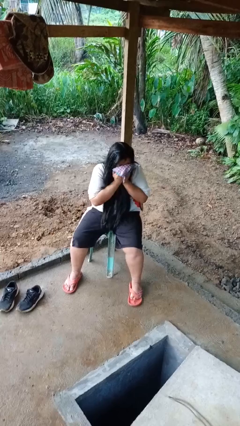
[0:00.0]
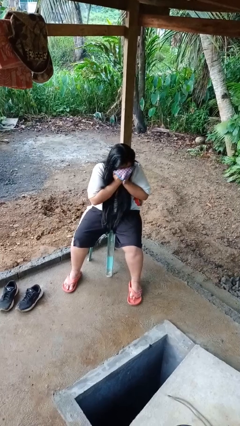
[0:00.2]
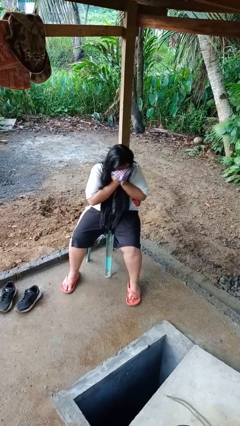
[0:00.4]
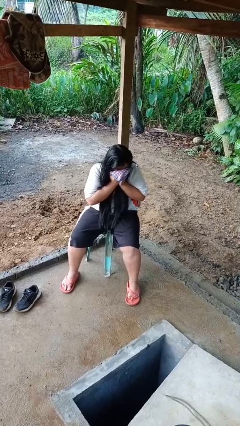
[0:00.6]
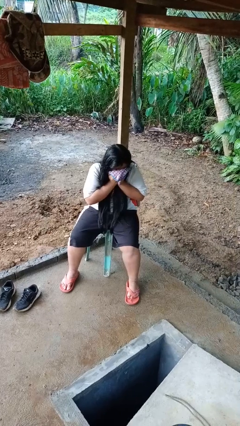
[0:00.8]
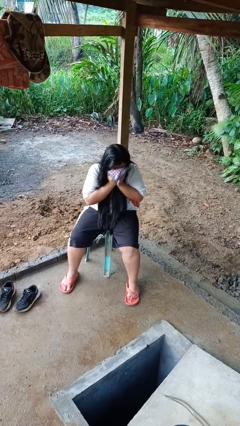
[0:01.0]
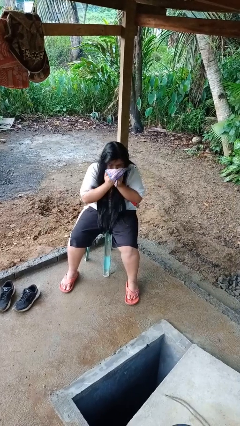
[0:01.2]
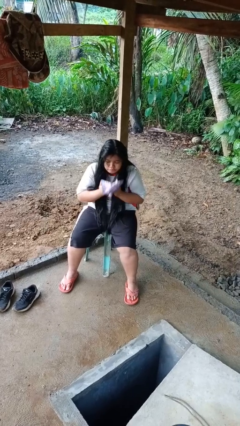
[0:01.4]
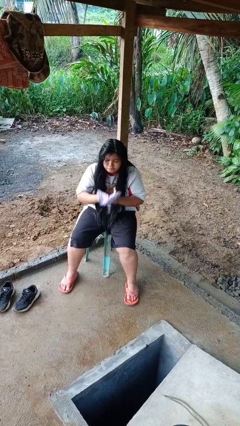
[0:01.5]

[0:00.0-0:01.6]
person blows nose

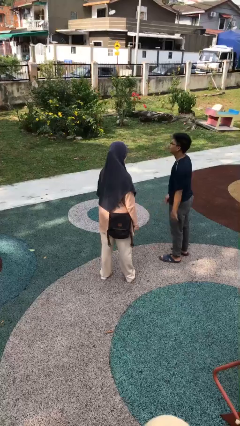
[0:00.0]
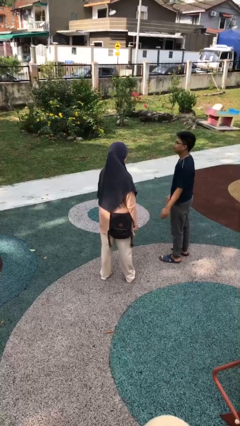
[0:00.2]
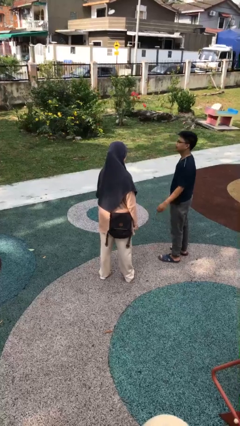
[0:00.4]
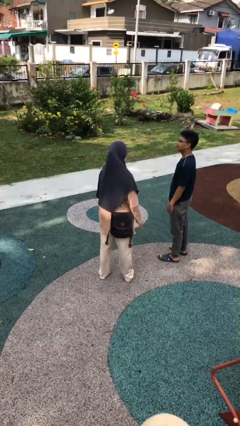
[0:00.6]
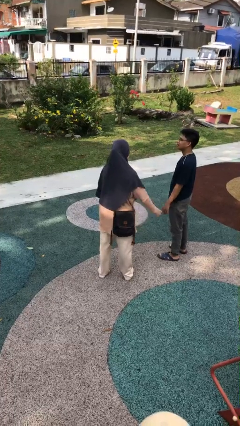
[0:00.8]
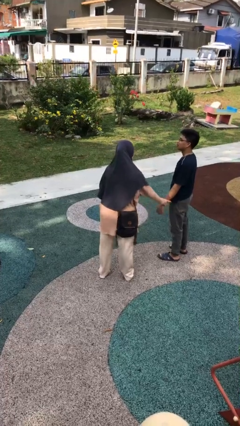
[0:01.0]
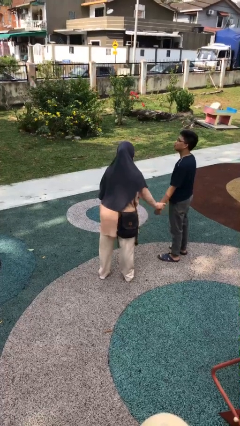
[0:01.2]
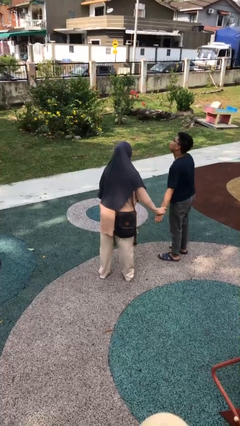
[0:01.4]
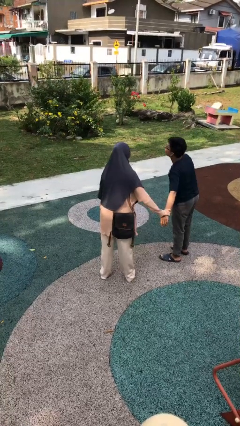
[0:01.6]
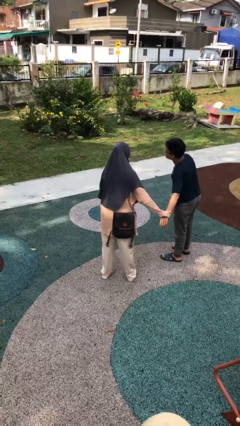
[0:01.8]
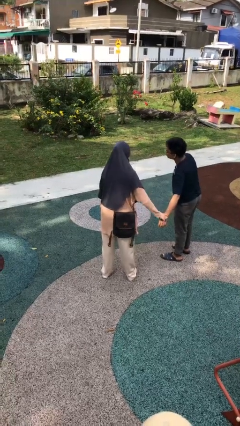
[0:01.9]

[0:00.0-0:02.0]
person grabs person by forearm

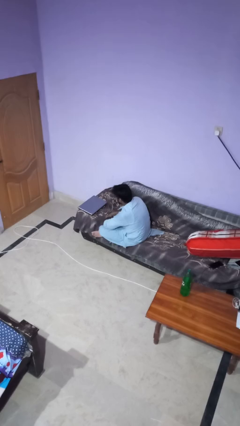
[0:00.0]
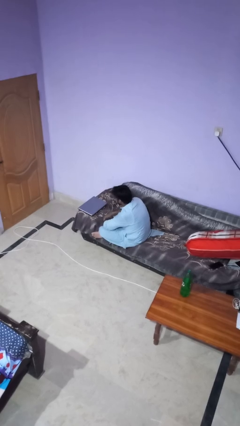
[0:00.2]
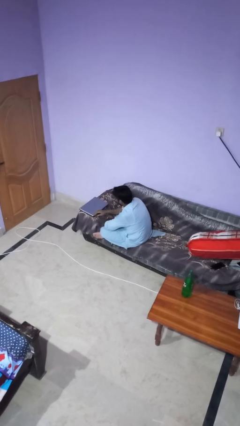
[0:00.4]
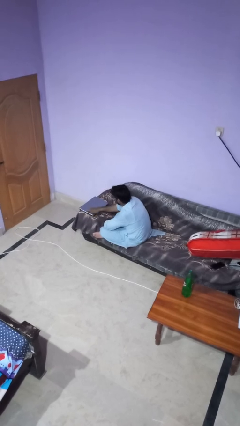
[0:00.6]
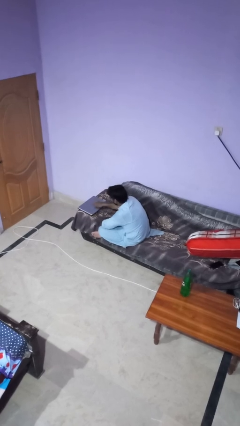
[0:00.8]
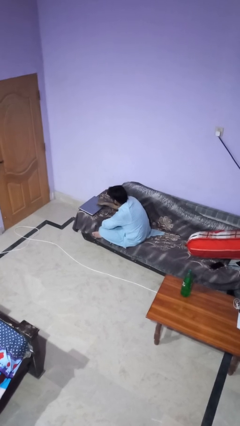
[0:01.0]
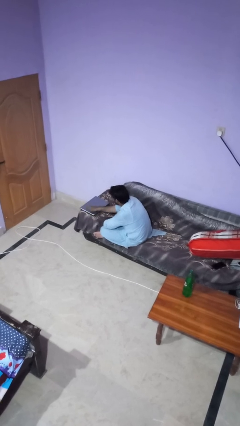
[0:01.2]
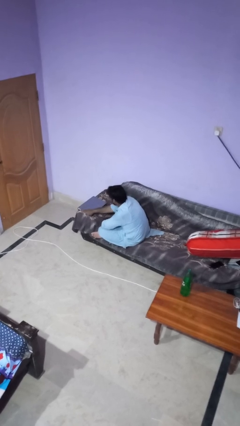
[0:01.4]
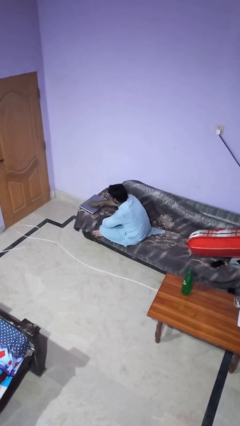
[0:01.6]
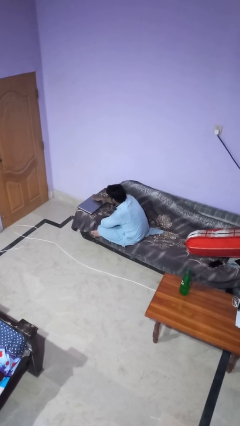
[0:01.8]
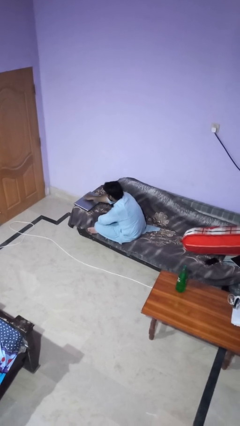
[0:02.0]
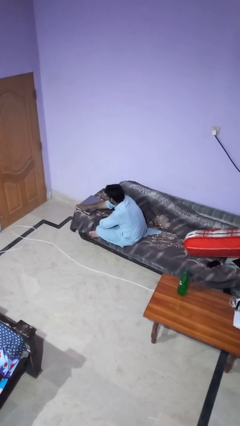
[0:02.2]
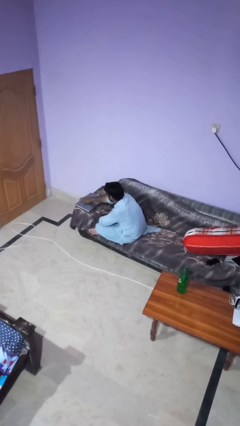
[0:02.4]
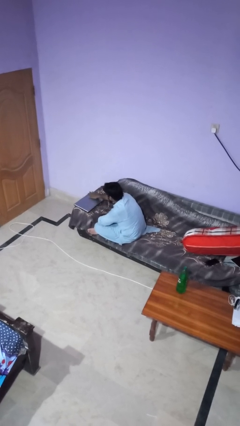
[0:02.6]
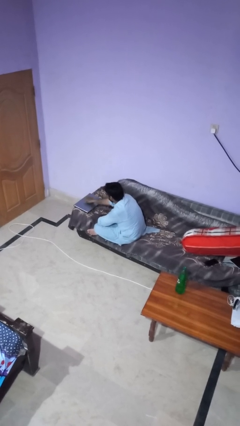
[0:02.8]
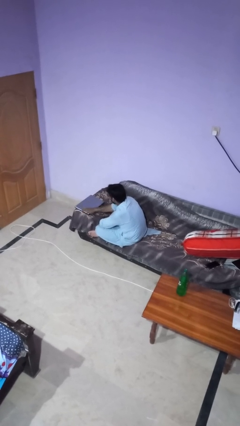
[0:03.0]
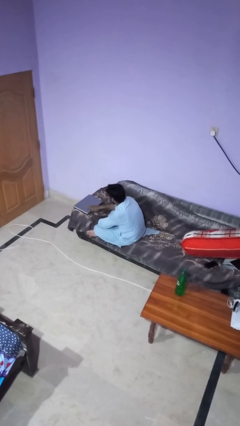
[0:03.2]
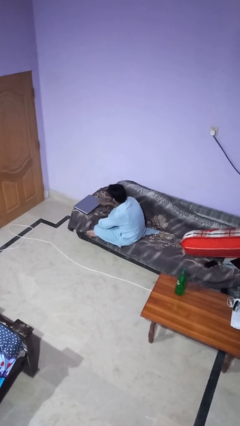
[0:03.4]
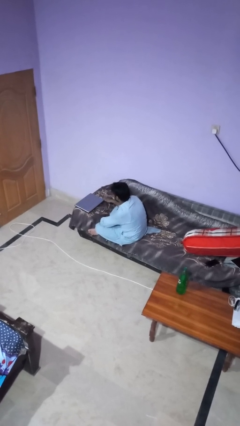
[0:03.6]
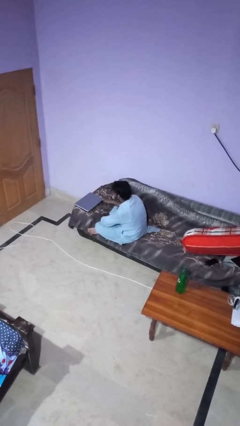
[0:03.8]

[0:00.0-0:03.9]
person waves hand over object

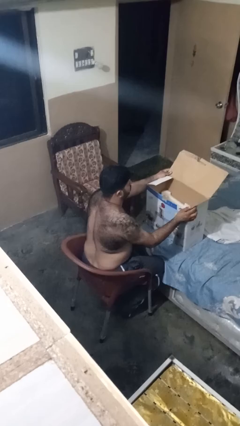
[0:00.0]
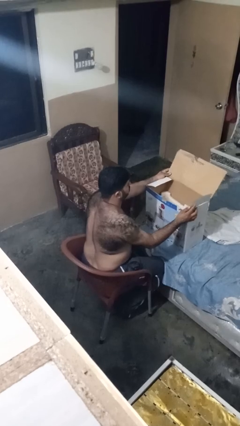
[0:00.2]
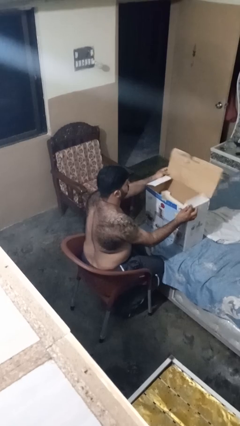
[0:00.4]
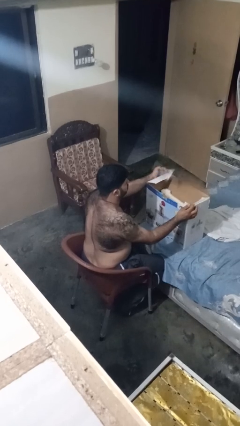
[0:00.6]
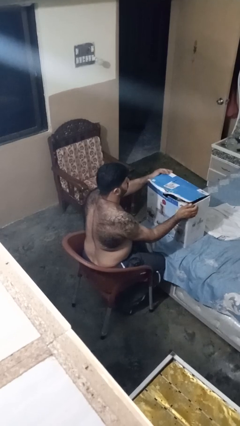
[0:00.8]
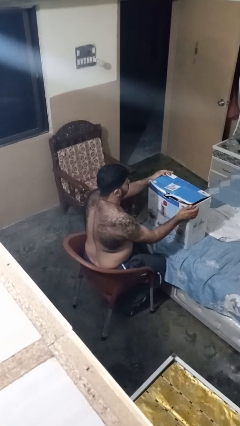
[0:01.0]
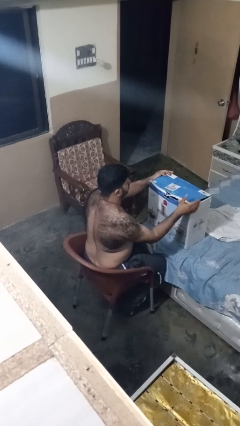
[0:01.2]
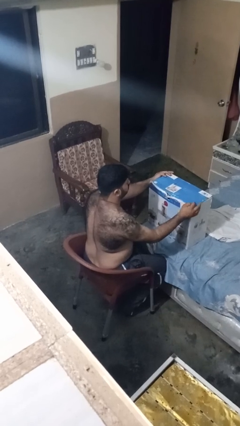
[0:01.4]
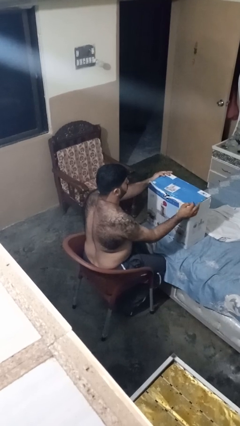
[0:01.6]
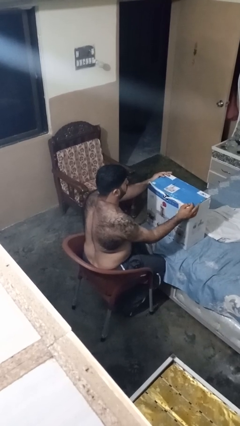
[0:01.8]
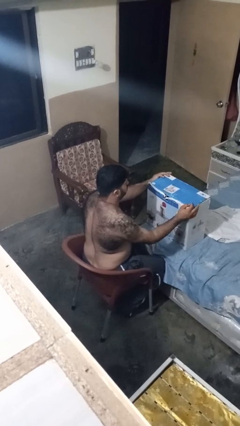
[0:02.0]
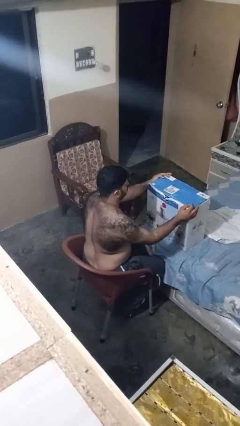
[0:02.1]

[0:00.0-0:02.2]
person closes box

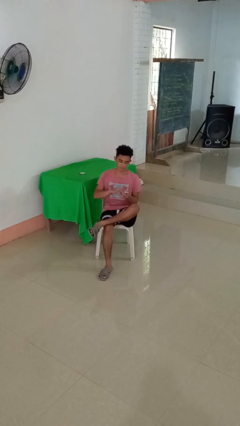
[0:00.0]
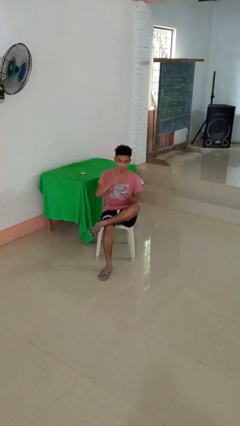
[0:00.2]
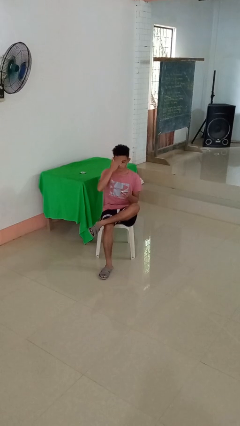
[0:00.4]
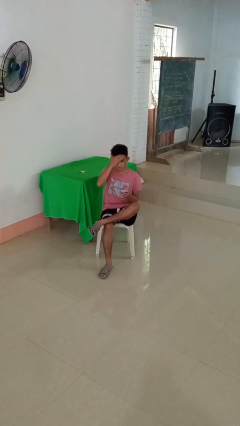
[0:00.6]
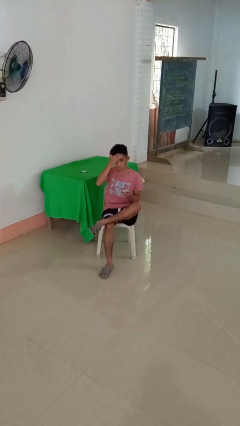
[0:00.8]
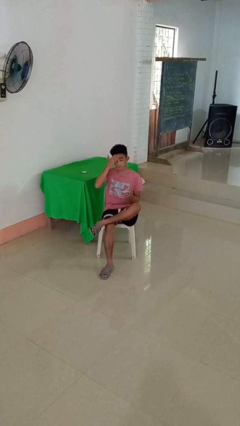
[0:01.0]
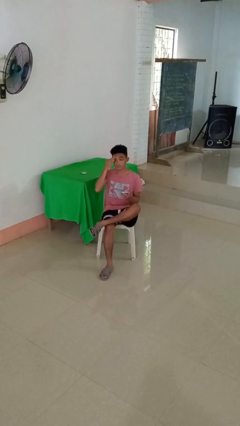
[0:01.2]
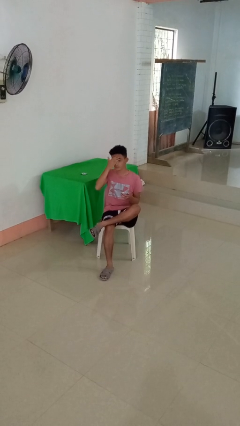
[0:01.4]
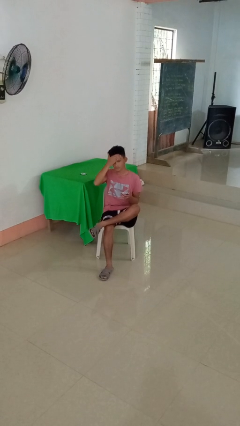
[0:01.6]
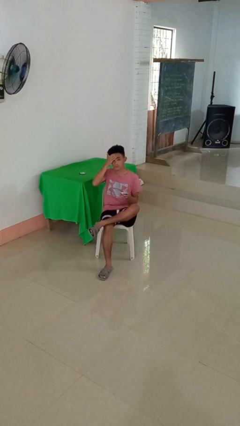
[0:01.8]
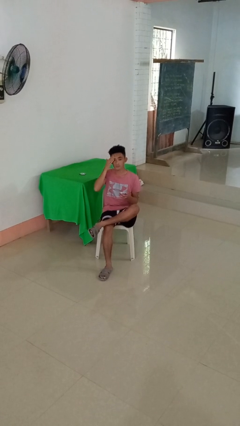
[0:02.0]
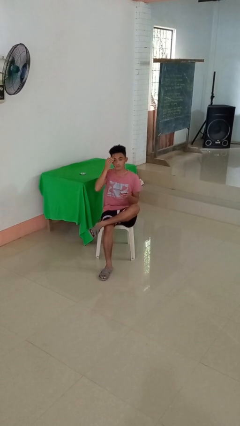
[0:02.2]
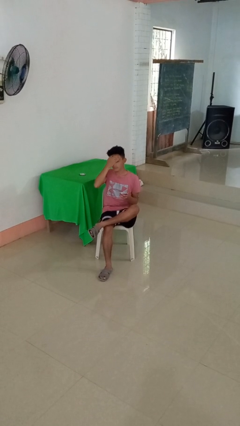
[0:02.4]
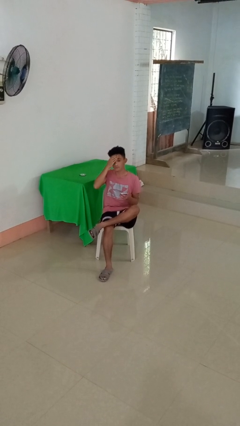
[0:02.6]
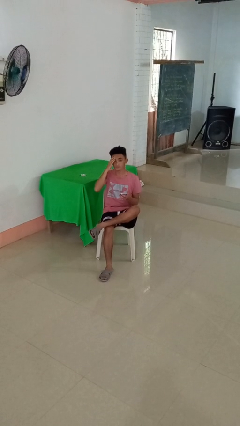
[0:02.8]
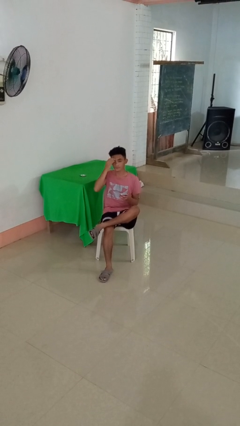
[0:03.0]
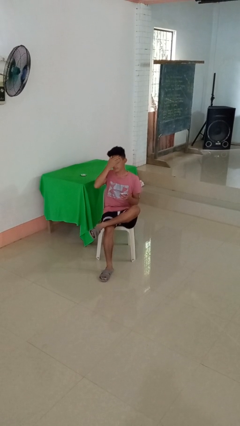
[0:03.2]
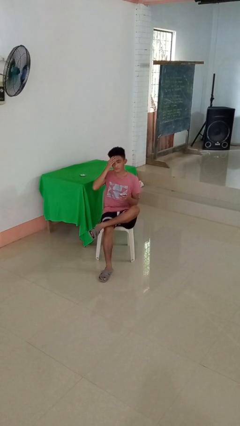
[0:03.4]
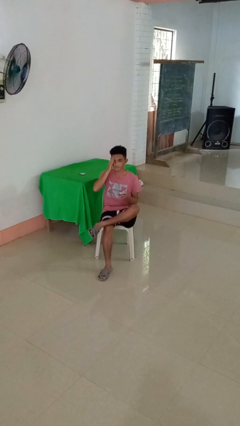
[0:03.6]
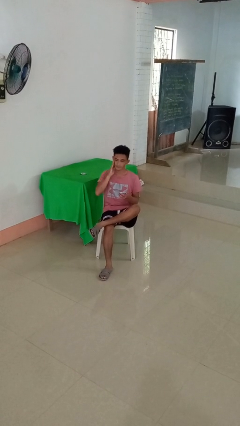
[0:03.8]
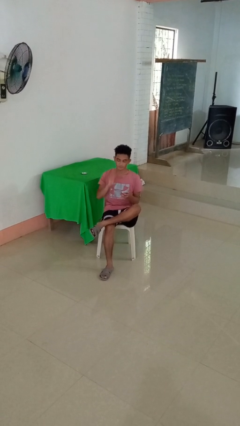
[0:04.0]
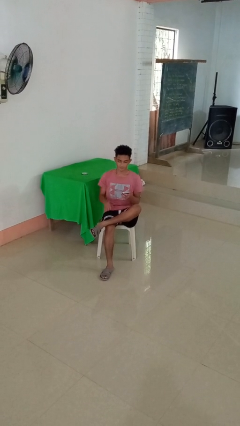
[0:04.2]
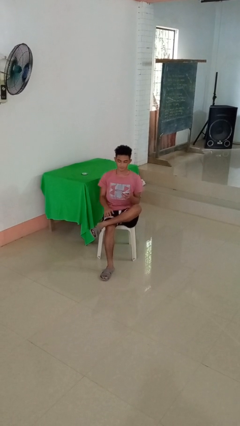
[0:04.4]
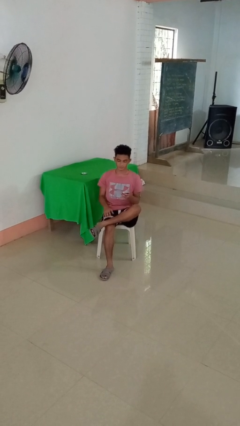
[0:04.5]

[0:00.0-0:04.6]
person applies facial moisturizer

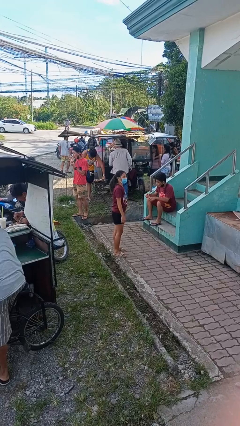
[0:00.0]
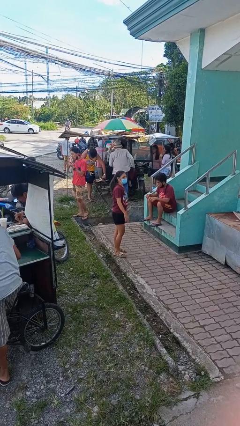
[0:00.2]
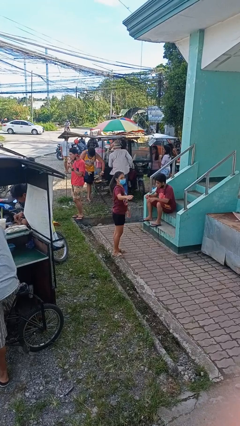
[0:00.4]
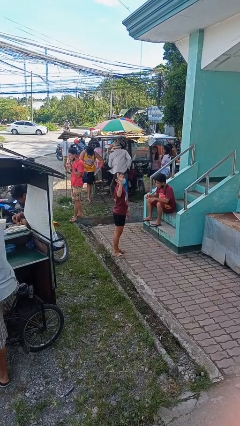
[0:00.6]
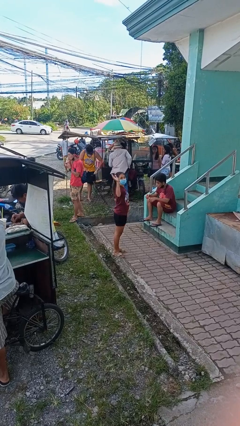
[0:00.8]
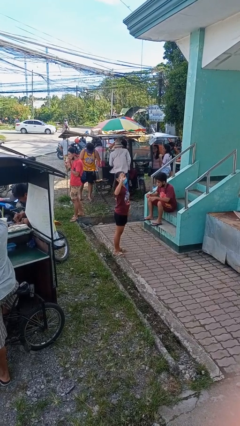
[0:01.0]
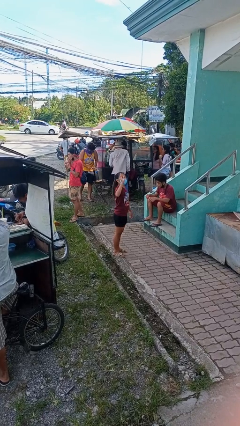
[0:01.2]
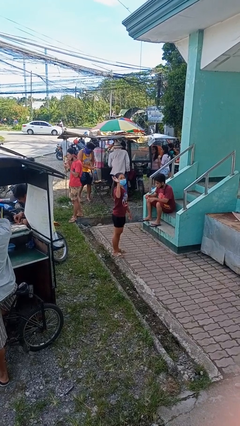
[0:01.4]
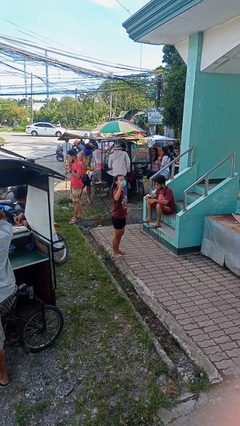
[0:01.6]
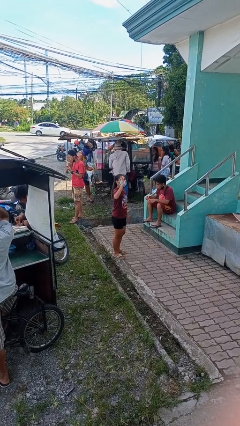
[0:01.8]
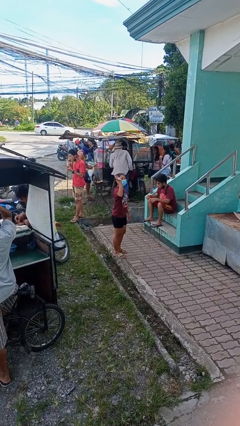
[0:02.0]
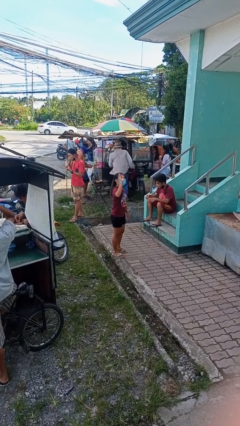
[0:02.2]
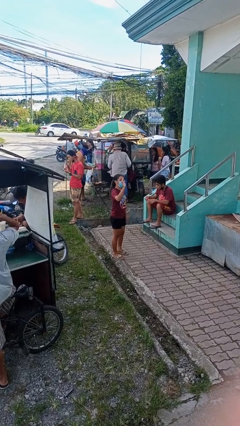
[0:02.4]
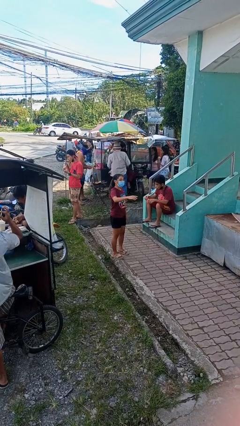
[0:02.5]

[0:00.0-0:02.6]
person waves at person

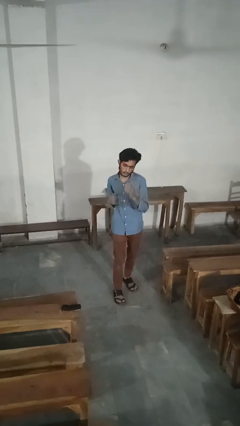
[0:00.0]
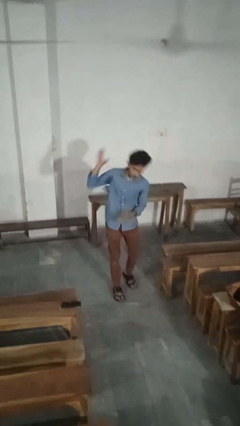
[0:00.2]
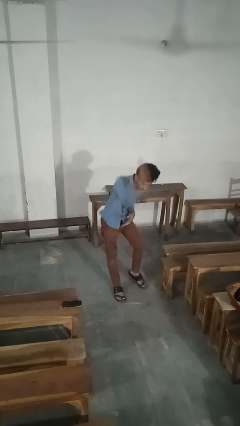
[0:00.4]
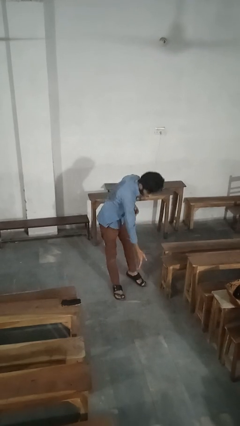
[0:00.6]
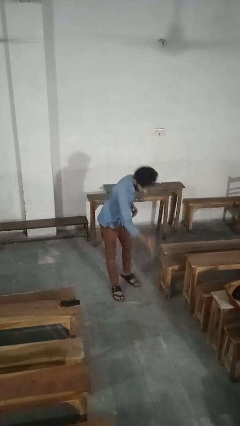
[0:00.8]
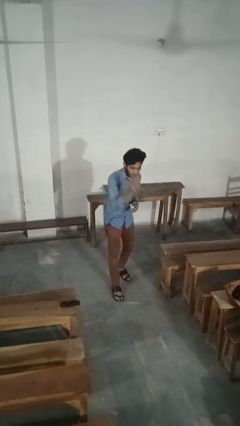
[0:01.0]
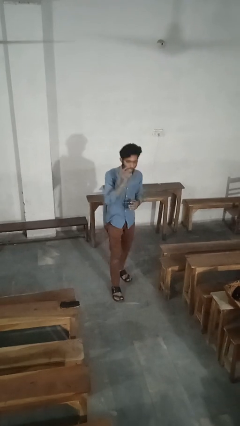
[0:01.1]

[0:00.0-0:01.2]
person karate chop
